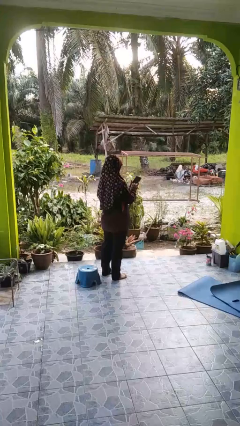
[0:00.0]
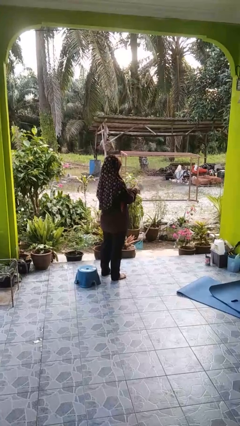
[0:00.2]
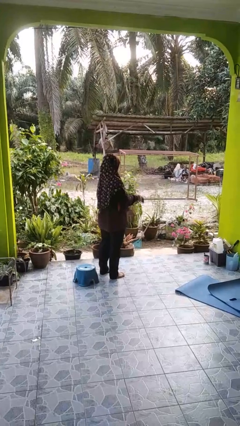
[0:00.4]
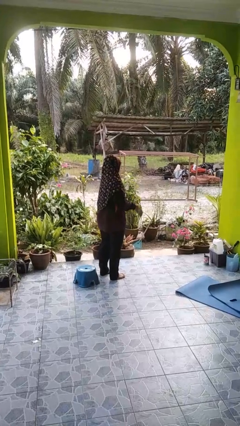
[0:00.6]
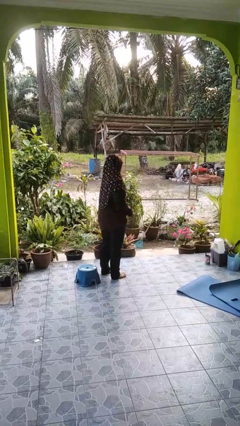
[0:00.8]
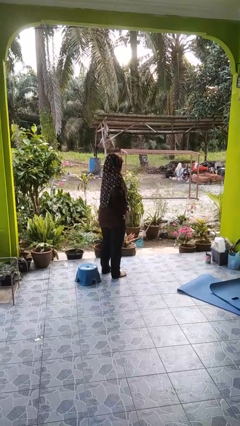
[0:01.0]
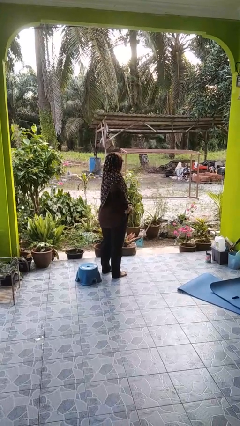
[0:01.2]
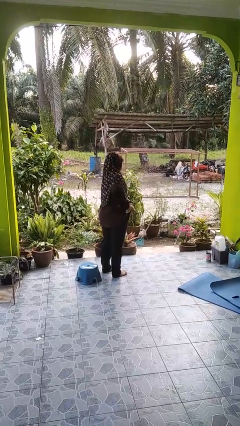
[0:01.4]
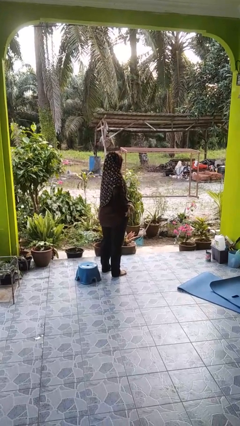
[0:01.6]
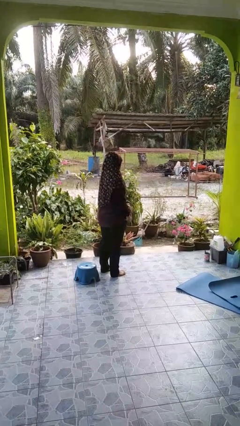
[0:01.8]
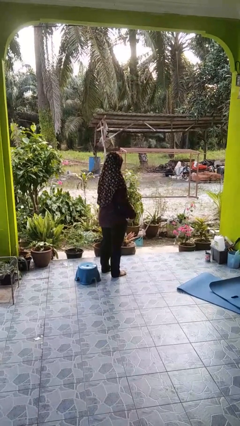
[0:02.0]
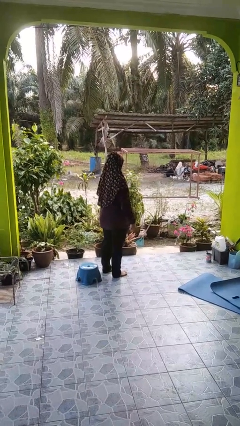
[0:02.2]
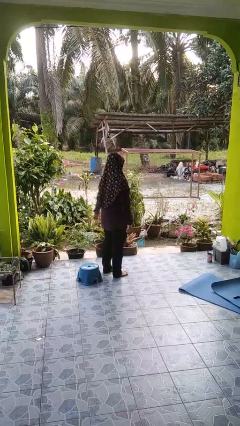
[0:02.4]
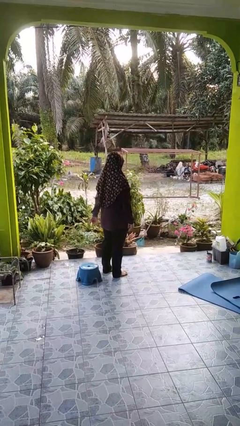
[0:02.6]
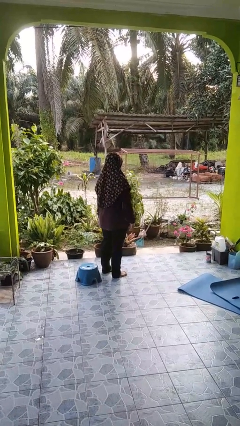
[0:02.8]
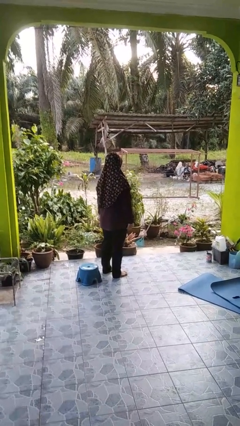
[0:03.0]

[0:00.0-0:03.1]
person puts phone into pocket

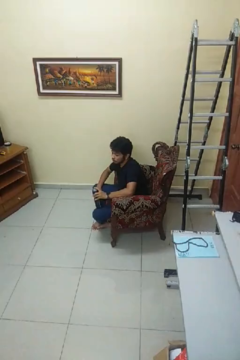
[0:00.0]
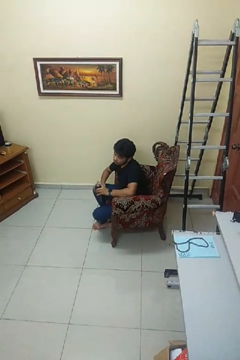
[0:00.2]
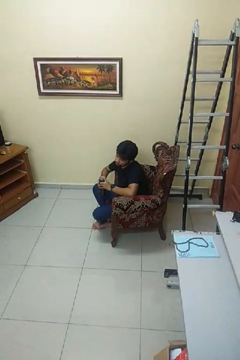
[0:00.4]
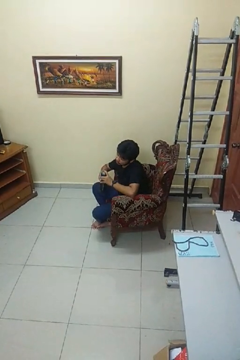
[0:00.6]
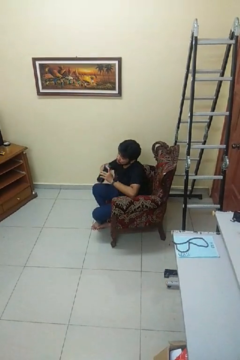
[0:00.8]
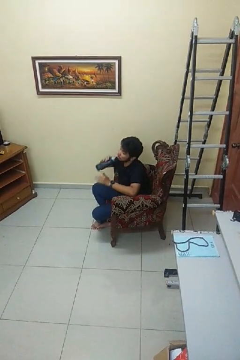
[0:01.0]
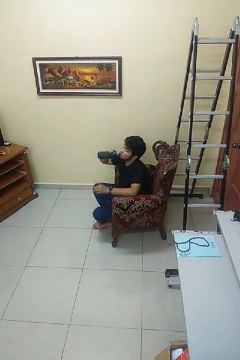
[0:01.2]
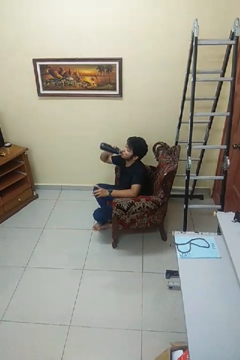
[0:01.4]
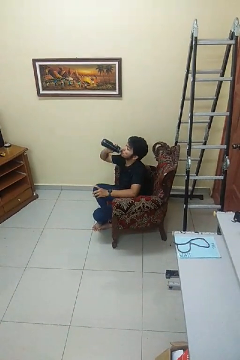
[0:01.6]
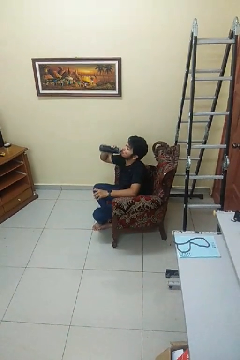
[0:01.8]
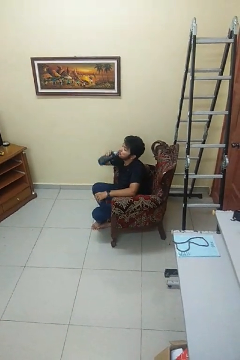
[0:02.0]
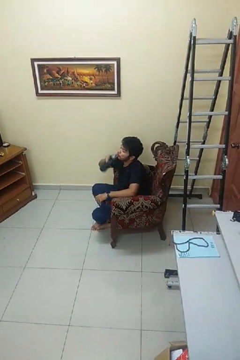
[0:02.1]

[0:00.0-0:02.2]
person drinks from bottle

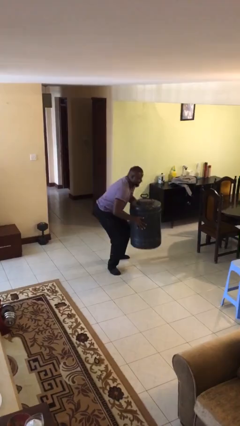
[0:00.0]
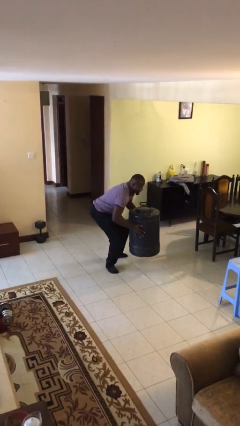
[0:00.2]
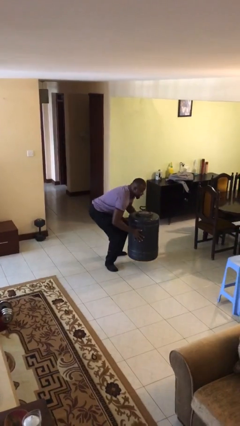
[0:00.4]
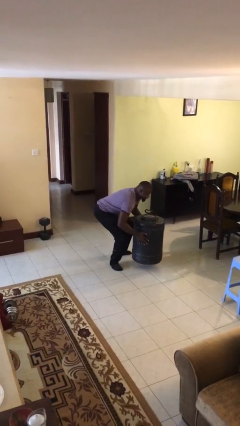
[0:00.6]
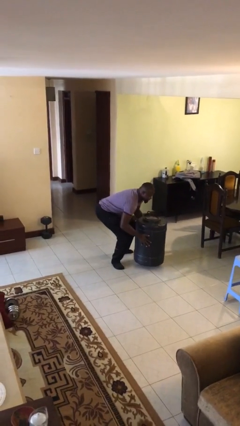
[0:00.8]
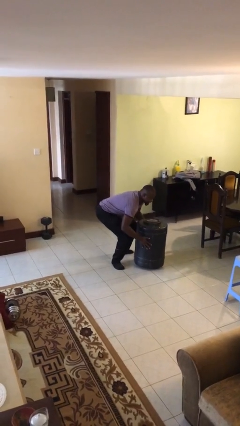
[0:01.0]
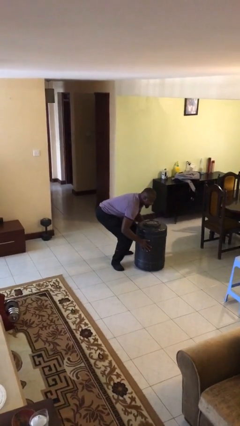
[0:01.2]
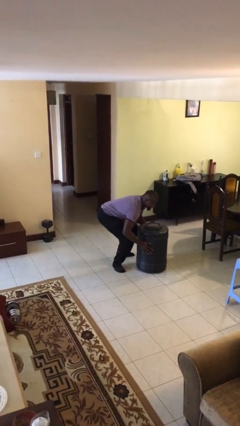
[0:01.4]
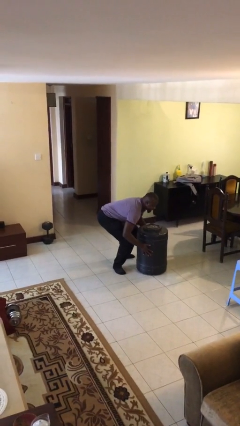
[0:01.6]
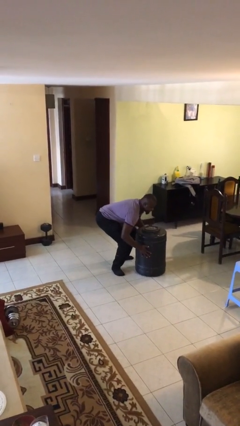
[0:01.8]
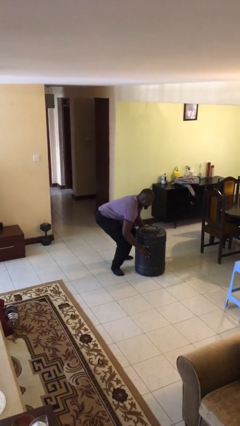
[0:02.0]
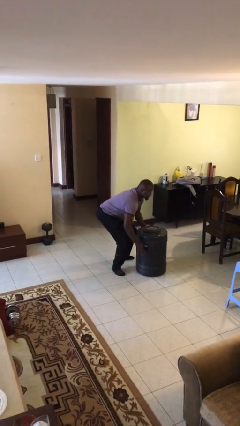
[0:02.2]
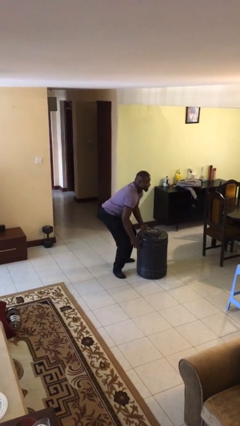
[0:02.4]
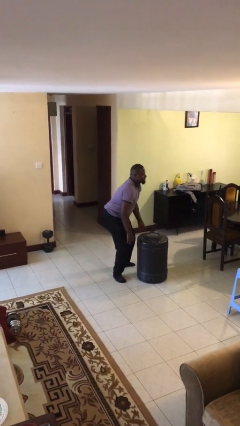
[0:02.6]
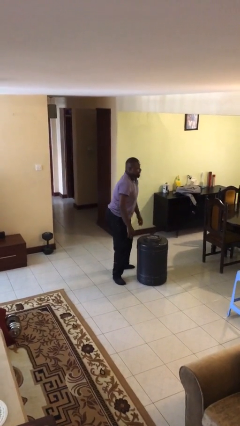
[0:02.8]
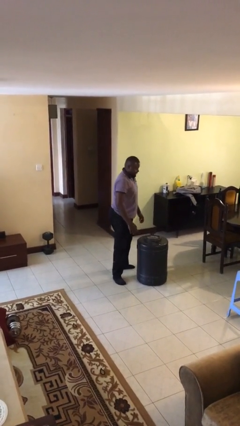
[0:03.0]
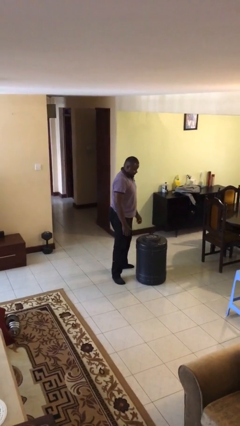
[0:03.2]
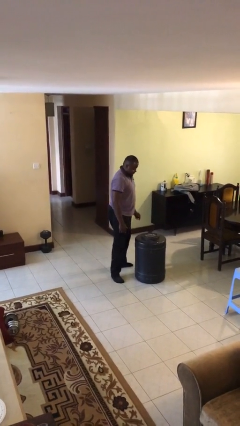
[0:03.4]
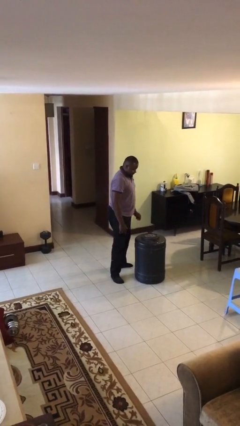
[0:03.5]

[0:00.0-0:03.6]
person puts down object on floor

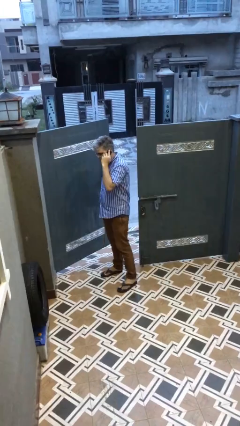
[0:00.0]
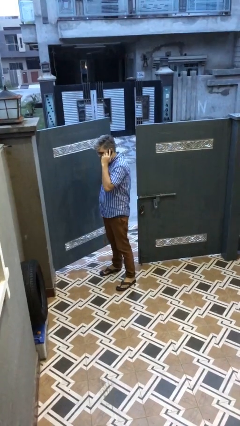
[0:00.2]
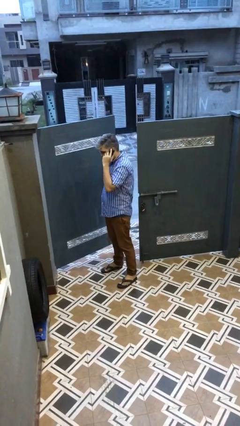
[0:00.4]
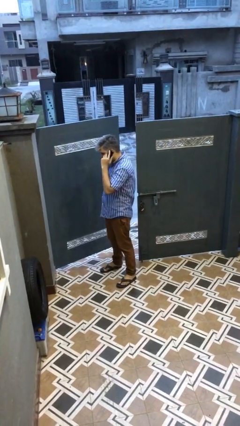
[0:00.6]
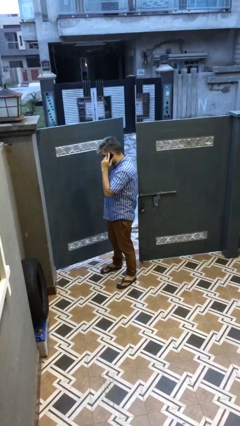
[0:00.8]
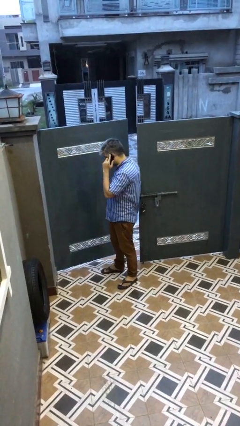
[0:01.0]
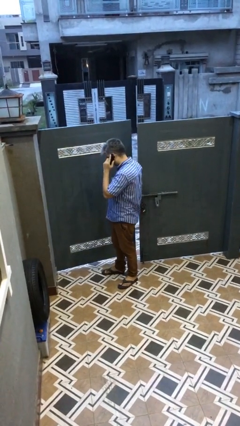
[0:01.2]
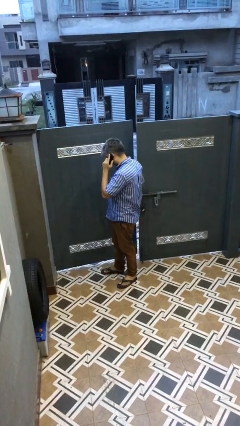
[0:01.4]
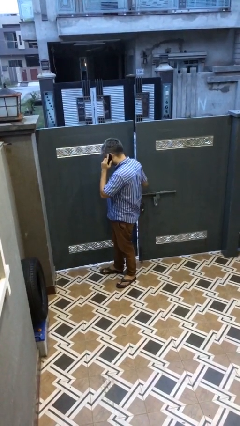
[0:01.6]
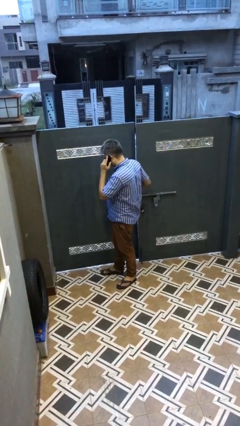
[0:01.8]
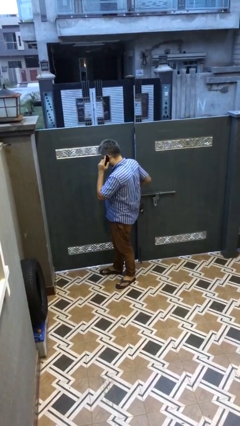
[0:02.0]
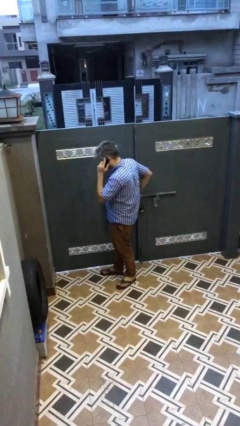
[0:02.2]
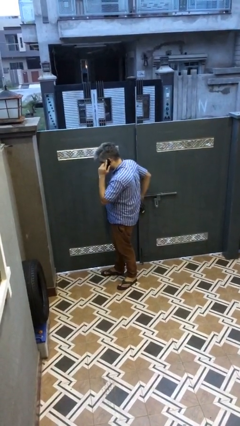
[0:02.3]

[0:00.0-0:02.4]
person closes facility door

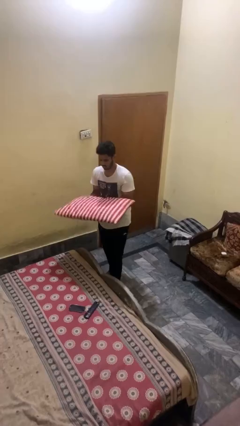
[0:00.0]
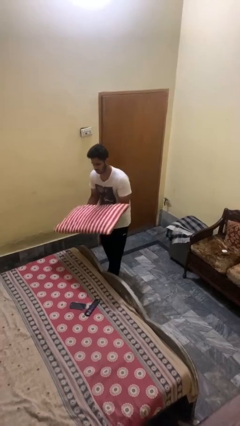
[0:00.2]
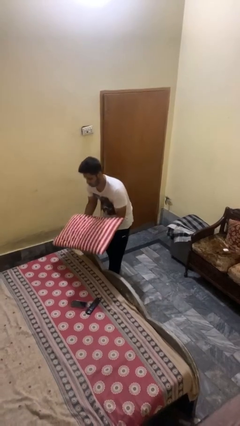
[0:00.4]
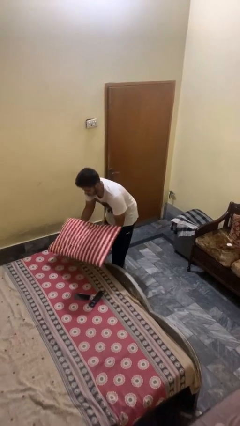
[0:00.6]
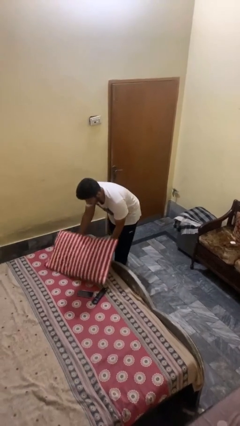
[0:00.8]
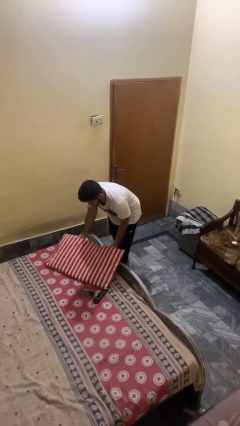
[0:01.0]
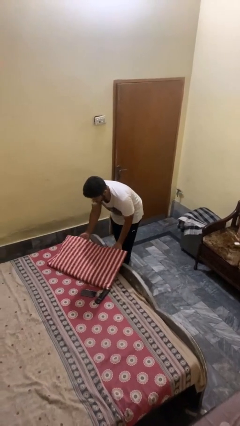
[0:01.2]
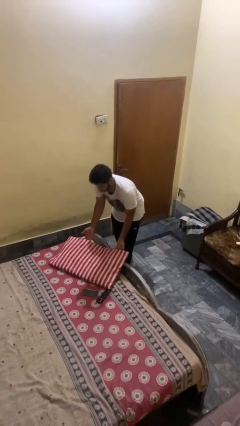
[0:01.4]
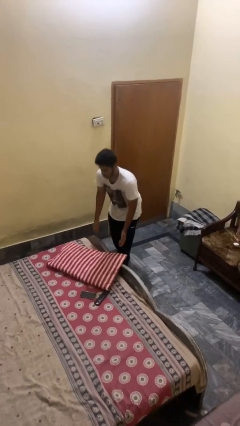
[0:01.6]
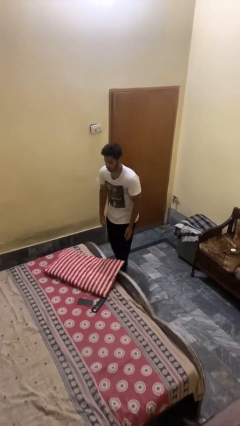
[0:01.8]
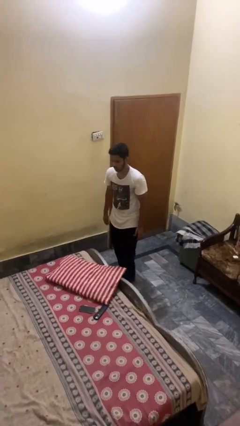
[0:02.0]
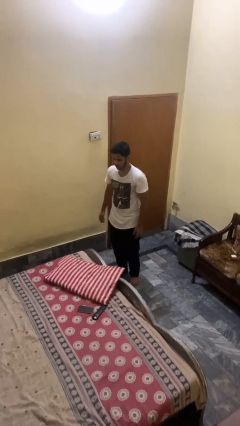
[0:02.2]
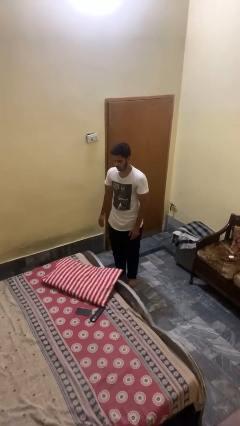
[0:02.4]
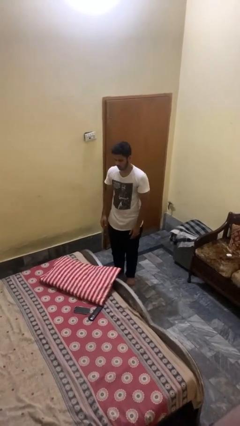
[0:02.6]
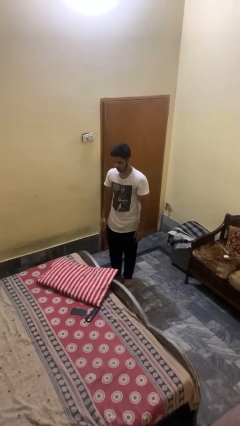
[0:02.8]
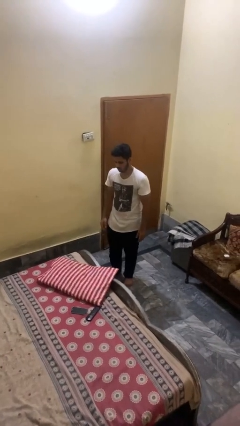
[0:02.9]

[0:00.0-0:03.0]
person puts down object on bed

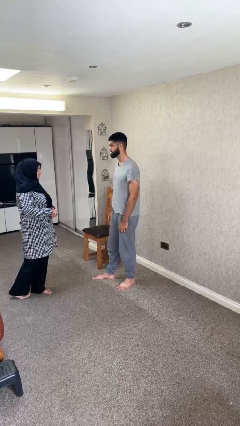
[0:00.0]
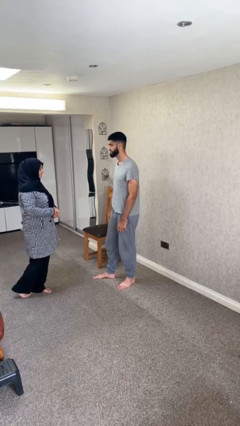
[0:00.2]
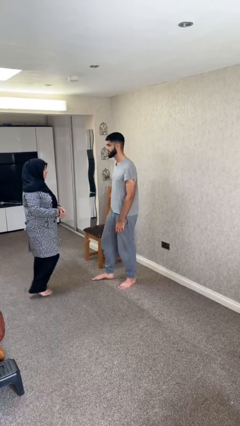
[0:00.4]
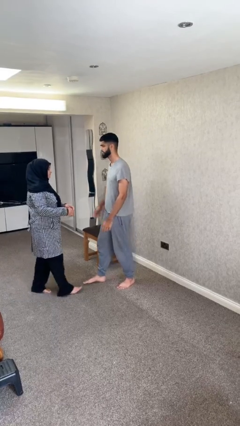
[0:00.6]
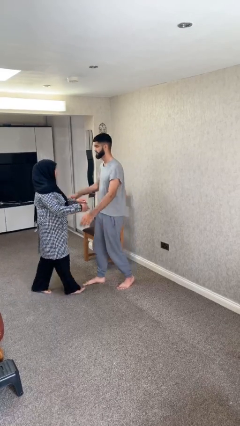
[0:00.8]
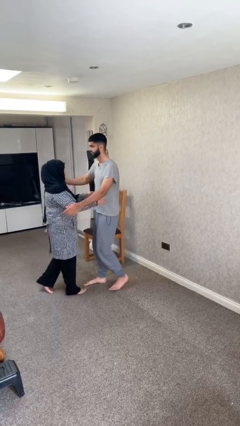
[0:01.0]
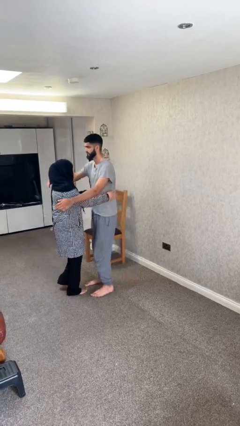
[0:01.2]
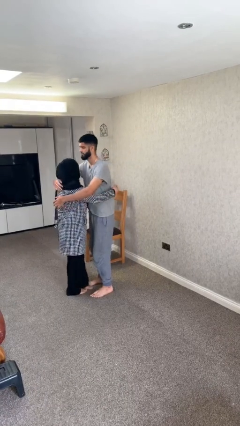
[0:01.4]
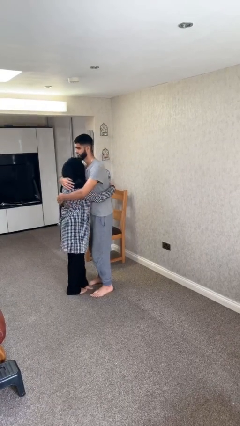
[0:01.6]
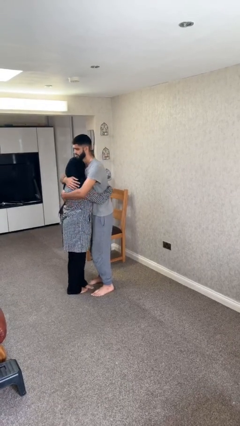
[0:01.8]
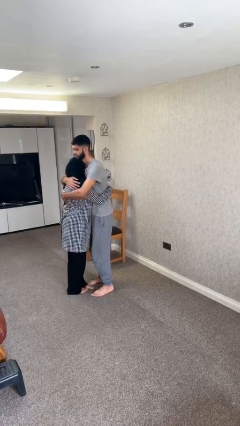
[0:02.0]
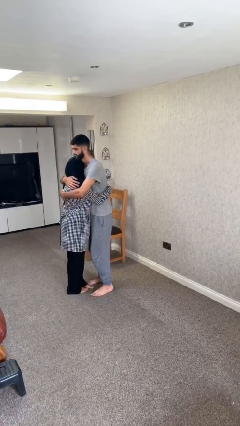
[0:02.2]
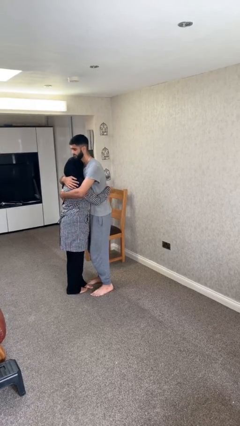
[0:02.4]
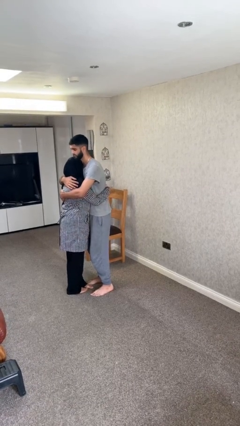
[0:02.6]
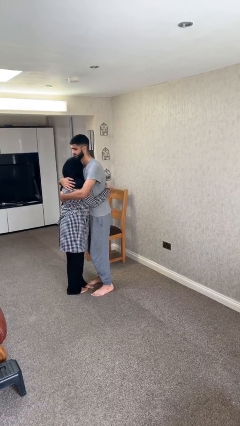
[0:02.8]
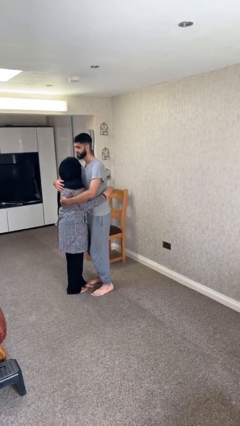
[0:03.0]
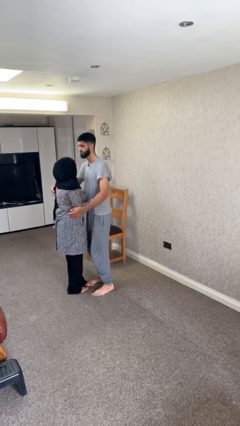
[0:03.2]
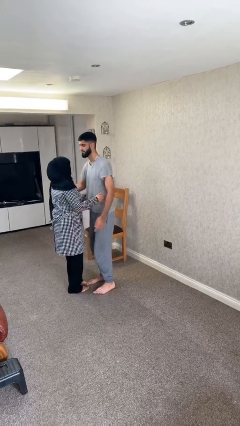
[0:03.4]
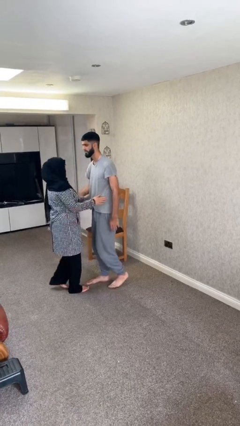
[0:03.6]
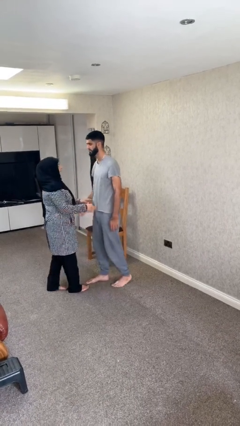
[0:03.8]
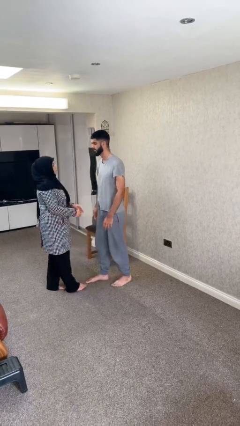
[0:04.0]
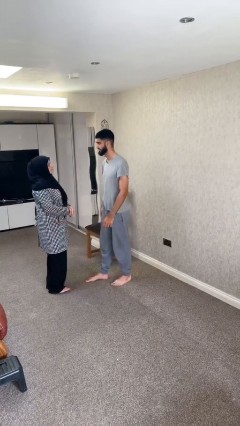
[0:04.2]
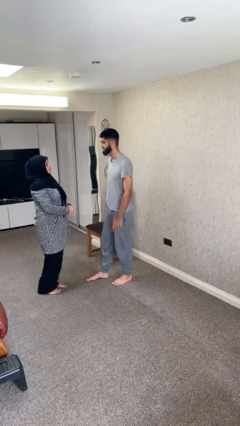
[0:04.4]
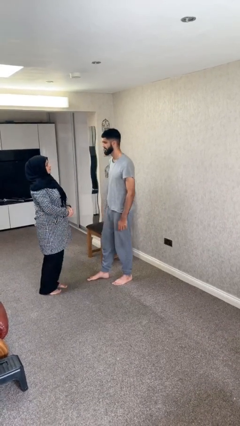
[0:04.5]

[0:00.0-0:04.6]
person embraces person
